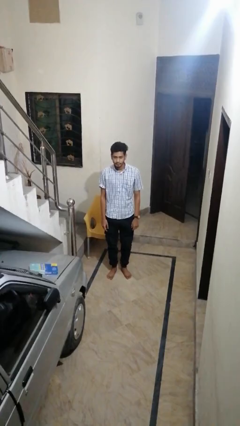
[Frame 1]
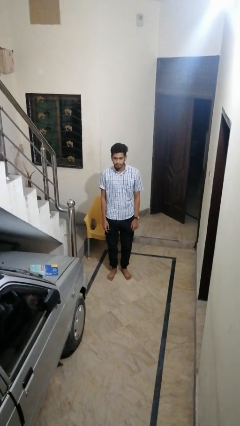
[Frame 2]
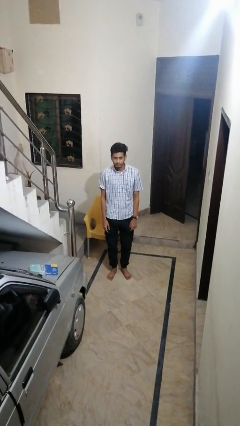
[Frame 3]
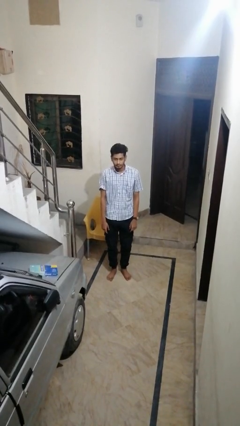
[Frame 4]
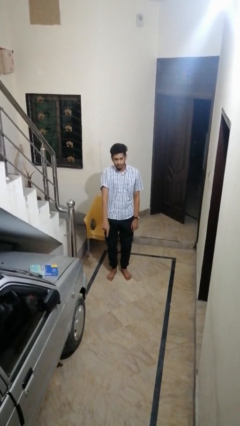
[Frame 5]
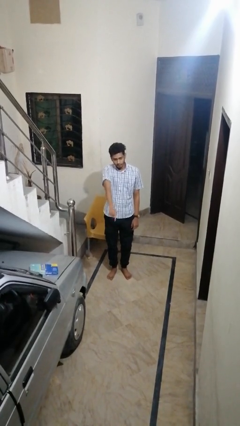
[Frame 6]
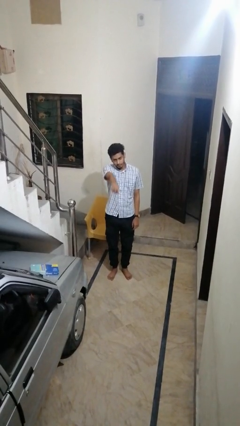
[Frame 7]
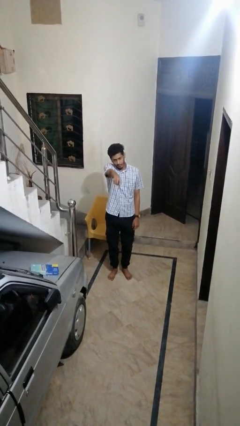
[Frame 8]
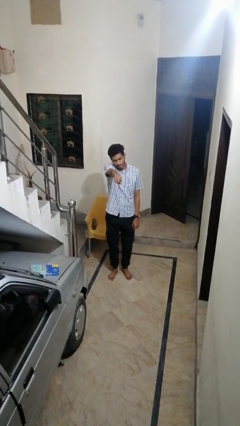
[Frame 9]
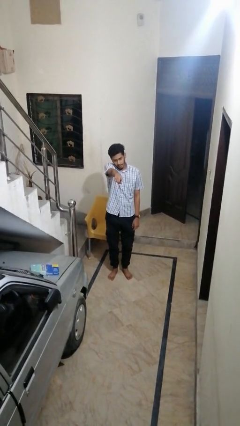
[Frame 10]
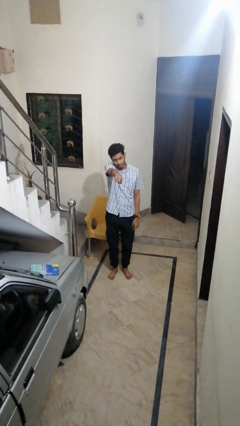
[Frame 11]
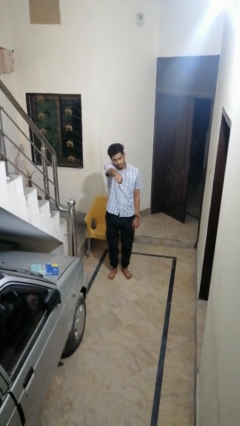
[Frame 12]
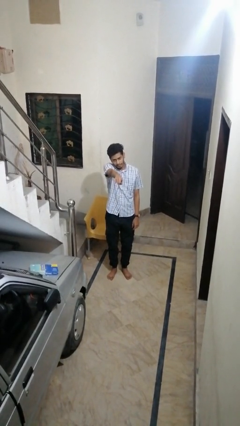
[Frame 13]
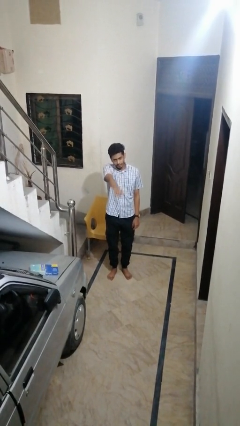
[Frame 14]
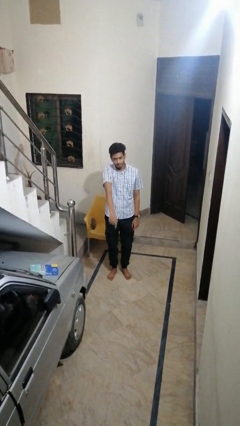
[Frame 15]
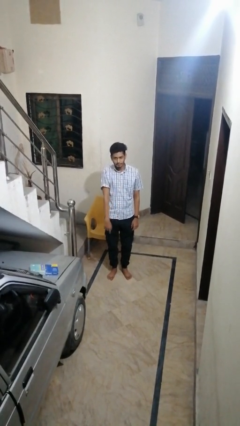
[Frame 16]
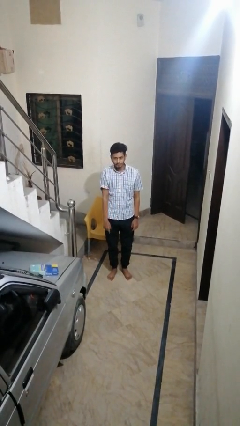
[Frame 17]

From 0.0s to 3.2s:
person points at person

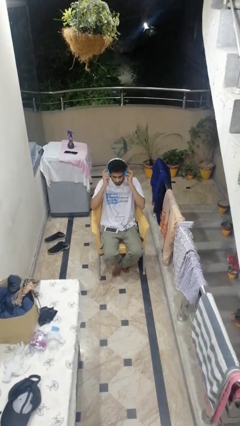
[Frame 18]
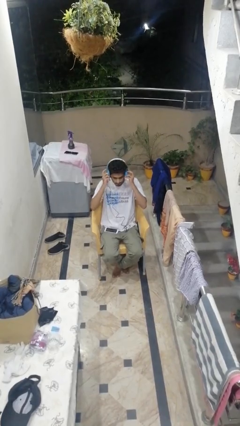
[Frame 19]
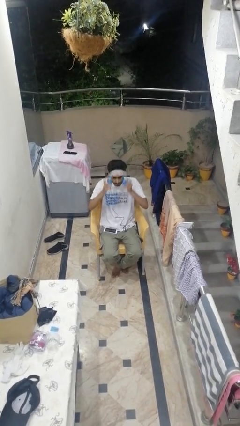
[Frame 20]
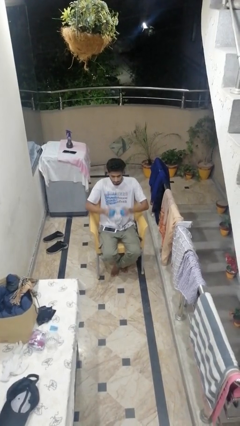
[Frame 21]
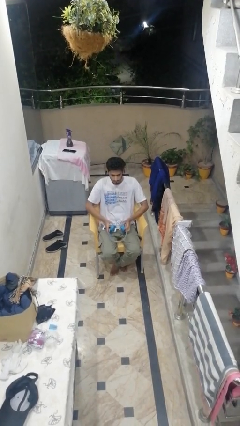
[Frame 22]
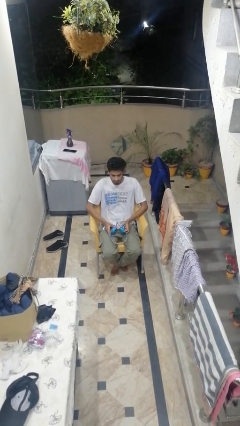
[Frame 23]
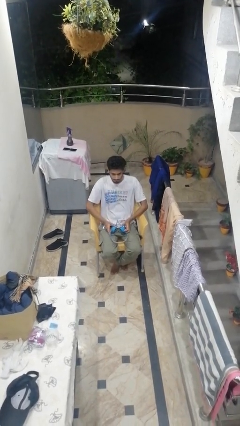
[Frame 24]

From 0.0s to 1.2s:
person takes off headphones

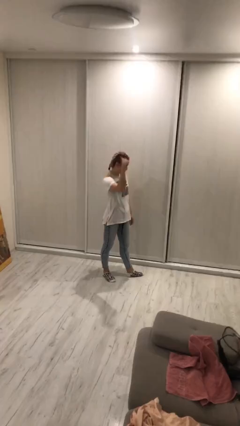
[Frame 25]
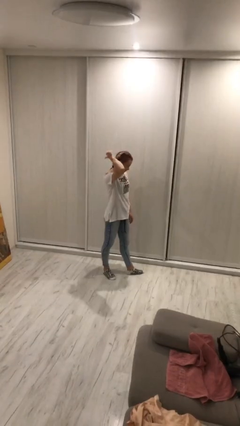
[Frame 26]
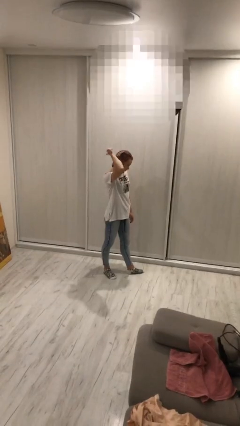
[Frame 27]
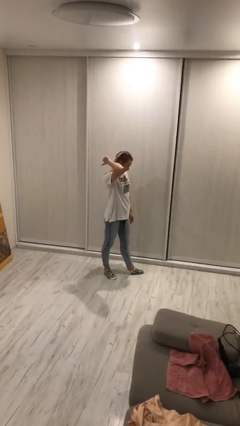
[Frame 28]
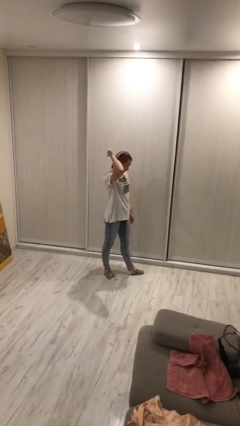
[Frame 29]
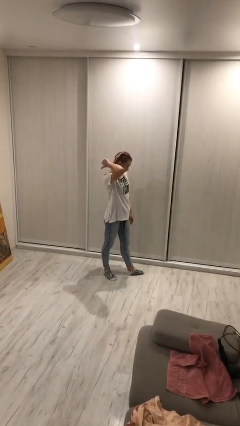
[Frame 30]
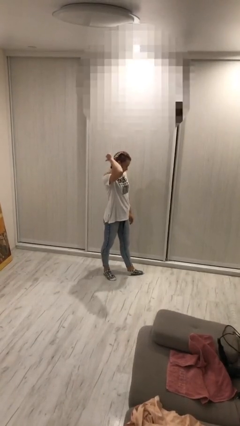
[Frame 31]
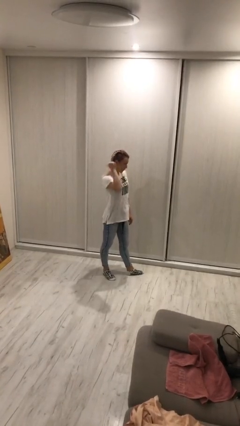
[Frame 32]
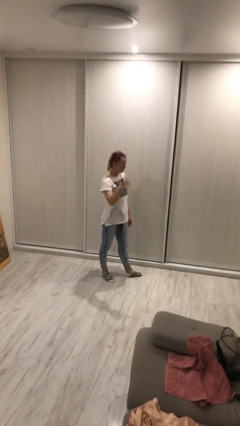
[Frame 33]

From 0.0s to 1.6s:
person gestures behind me

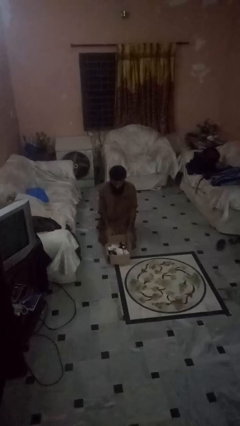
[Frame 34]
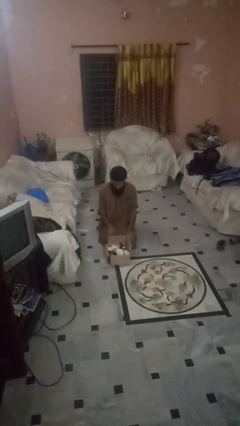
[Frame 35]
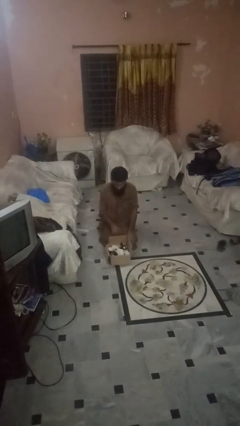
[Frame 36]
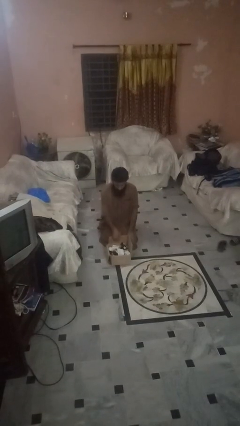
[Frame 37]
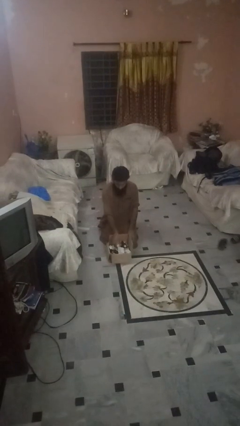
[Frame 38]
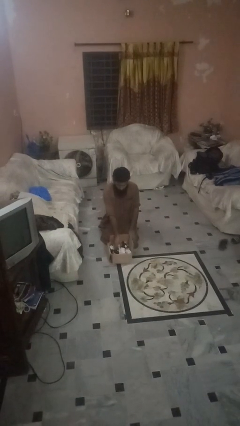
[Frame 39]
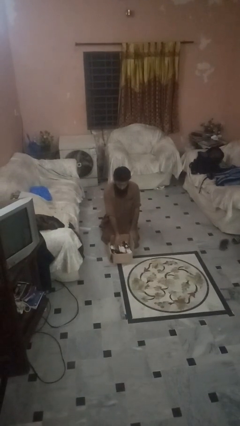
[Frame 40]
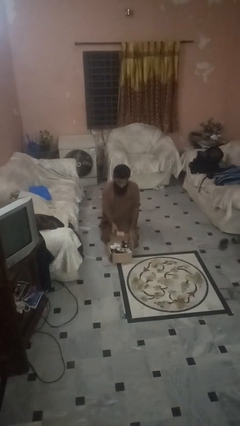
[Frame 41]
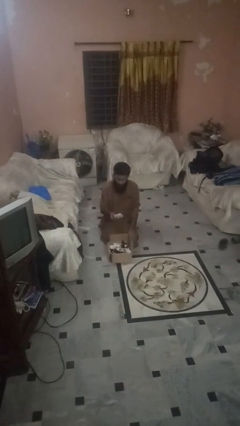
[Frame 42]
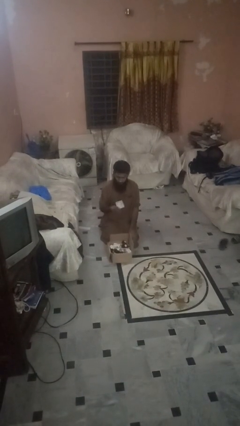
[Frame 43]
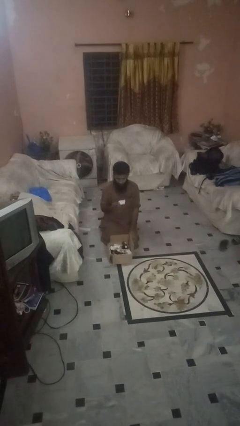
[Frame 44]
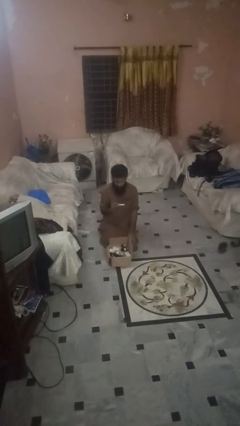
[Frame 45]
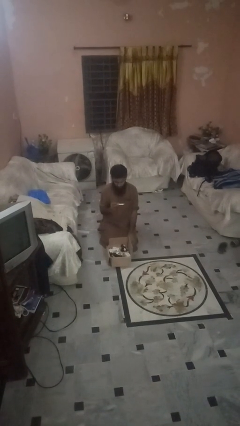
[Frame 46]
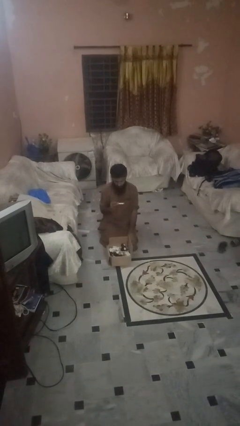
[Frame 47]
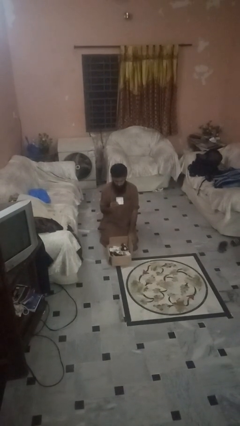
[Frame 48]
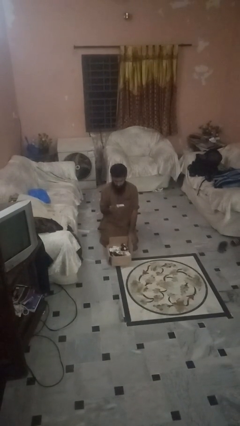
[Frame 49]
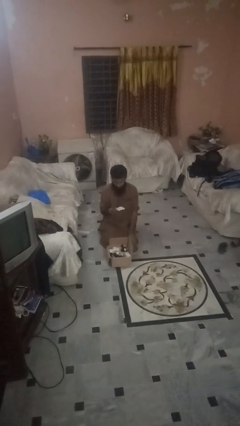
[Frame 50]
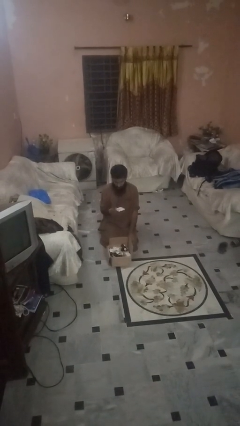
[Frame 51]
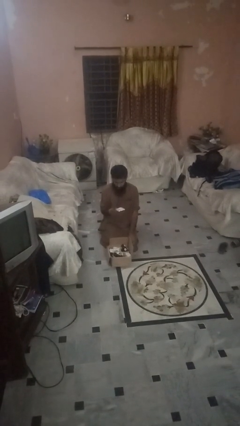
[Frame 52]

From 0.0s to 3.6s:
person takes object from box

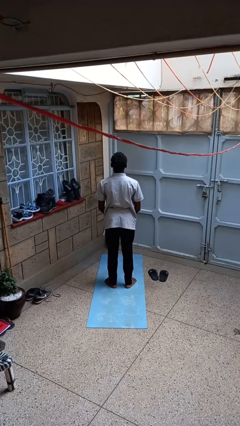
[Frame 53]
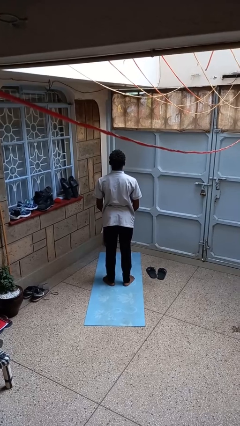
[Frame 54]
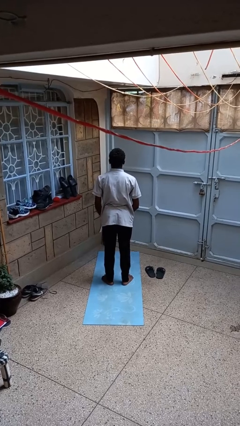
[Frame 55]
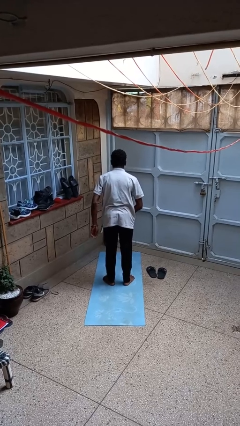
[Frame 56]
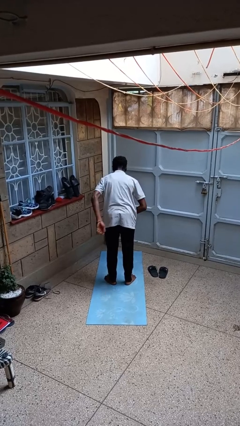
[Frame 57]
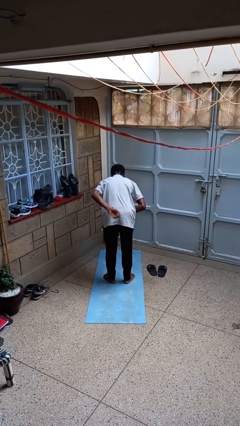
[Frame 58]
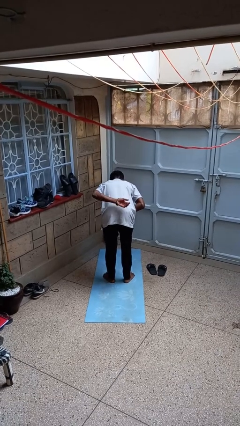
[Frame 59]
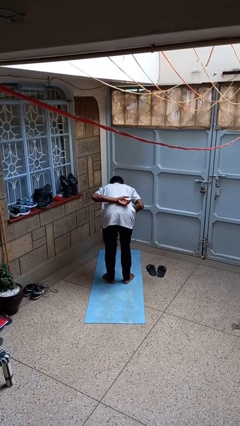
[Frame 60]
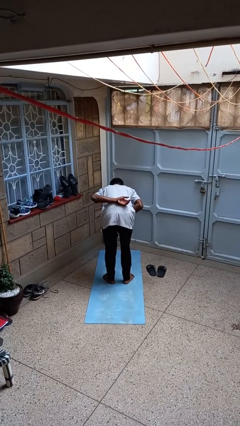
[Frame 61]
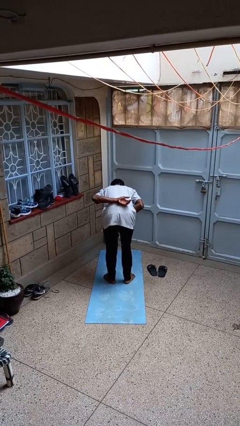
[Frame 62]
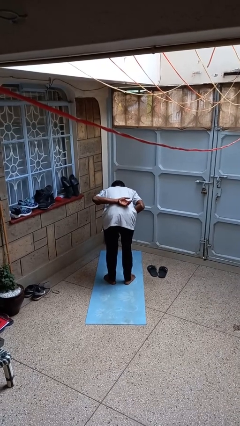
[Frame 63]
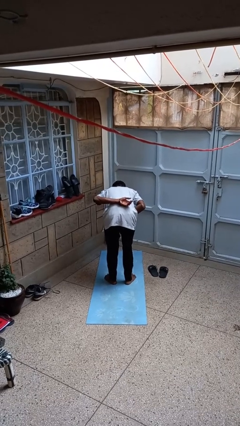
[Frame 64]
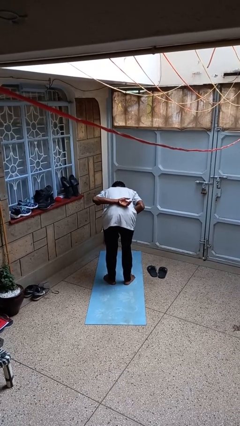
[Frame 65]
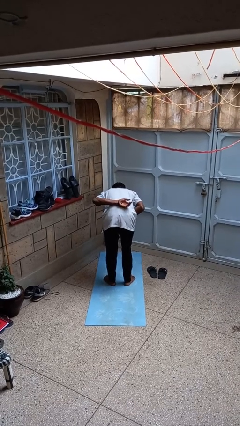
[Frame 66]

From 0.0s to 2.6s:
person bows

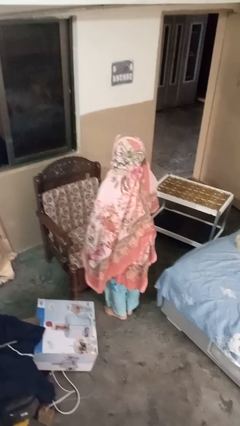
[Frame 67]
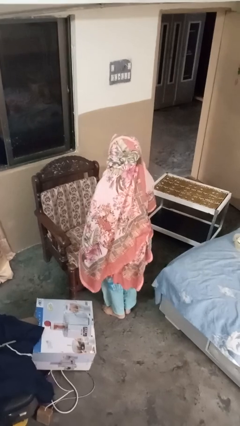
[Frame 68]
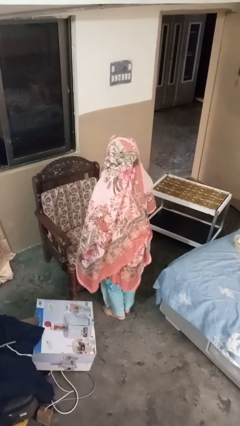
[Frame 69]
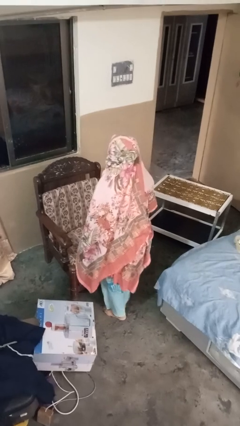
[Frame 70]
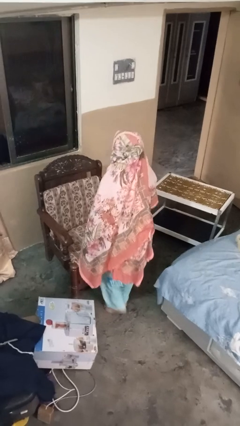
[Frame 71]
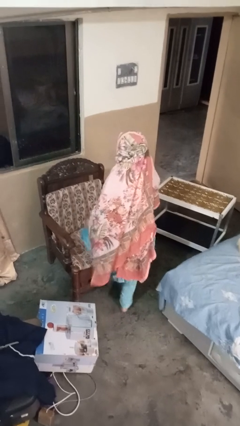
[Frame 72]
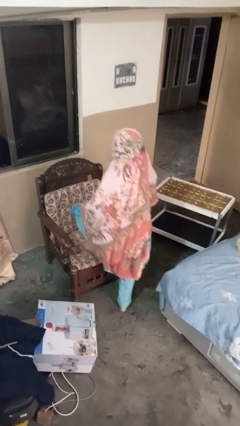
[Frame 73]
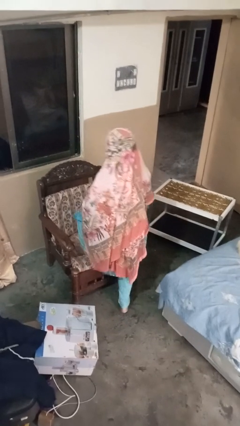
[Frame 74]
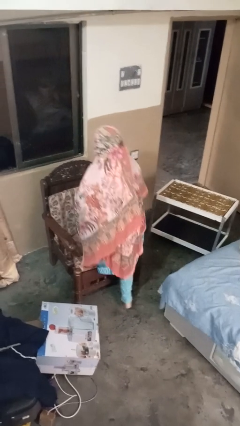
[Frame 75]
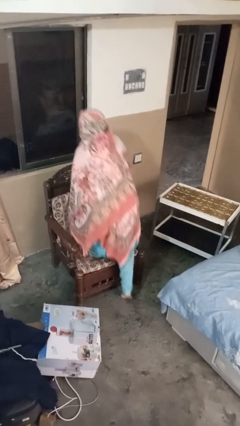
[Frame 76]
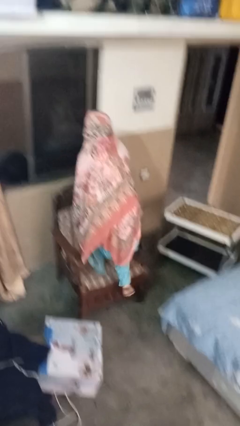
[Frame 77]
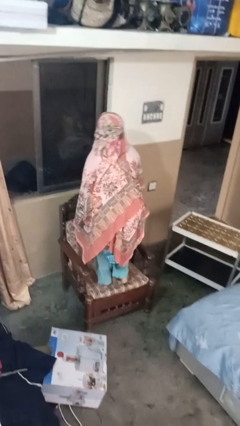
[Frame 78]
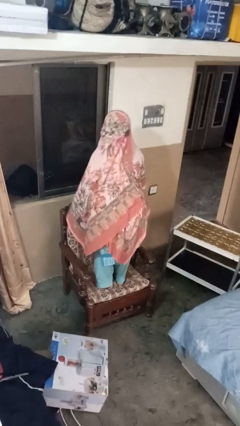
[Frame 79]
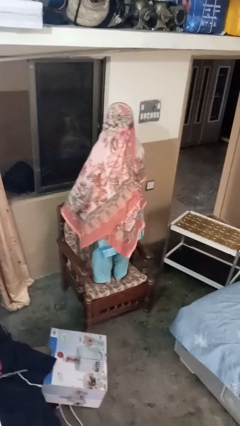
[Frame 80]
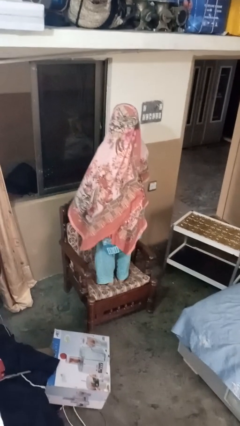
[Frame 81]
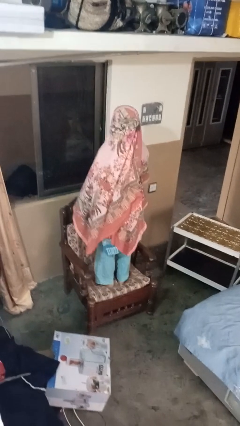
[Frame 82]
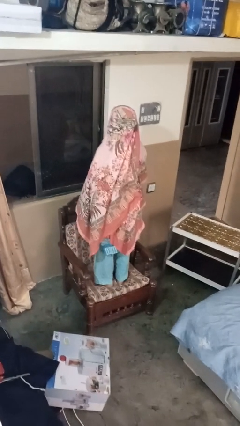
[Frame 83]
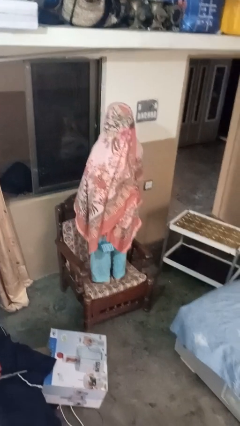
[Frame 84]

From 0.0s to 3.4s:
person climbs on couch

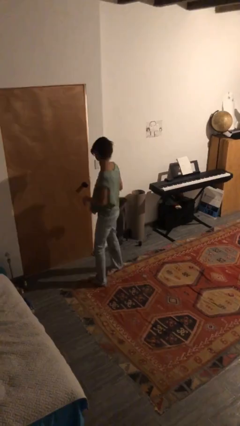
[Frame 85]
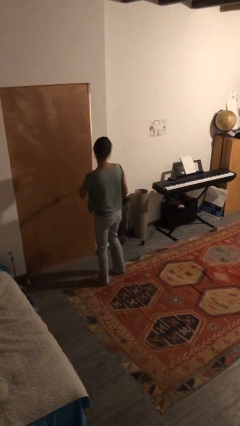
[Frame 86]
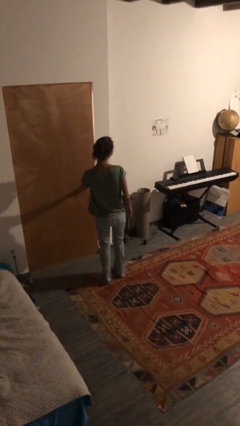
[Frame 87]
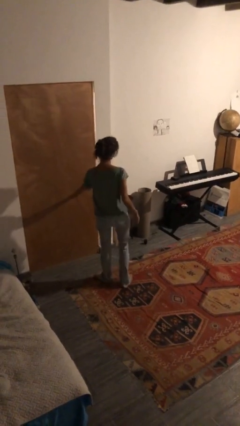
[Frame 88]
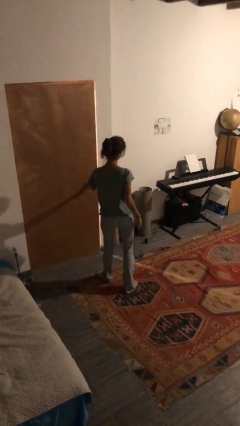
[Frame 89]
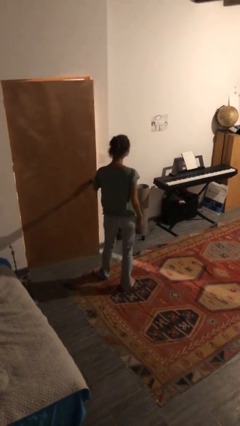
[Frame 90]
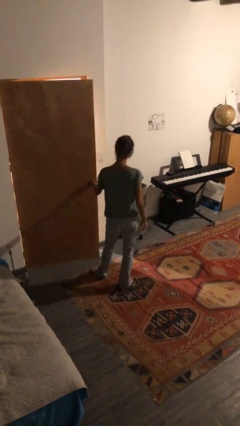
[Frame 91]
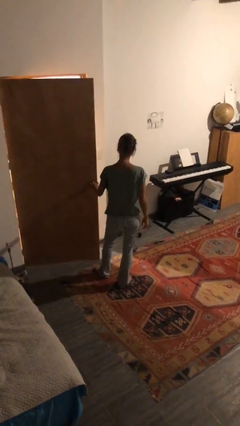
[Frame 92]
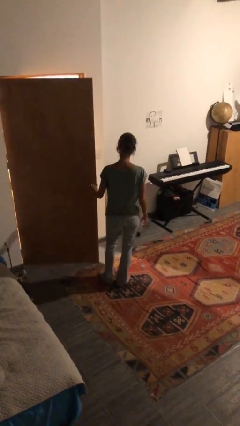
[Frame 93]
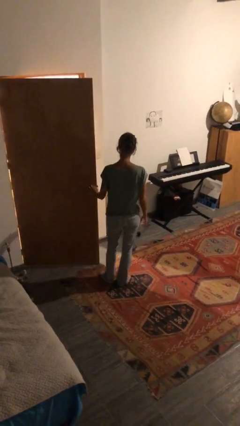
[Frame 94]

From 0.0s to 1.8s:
person opens facility door
